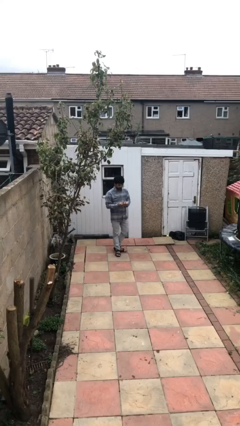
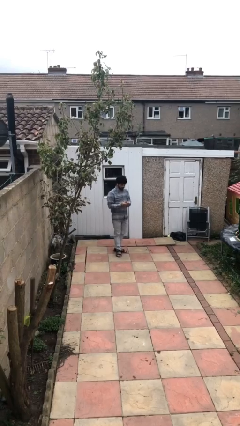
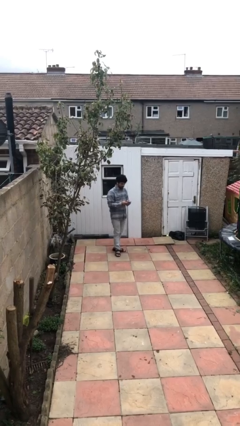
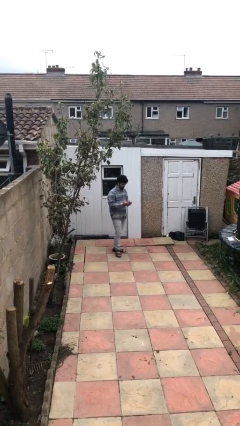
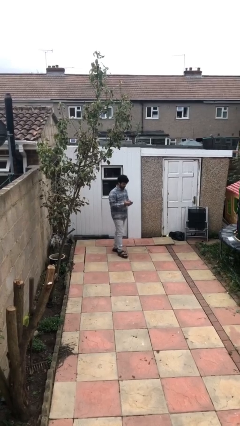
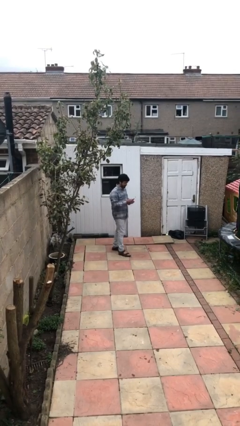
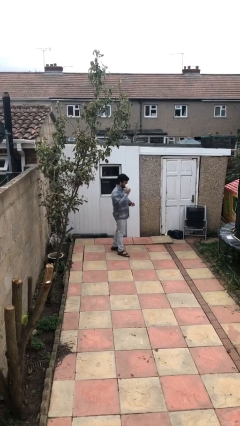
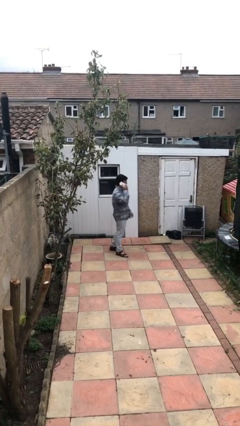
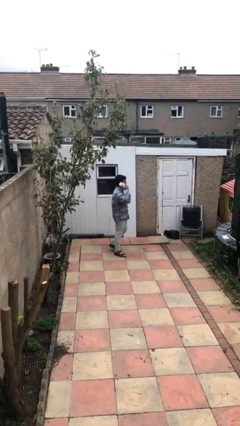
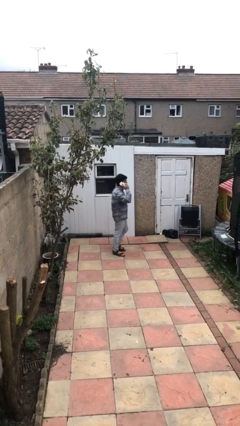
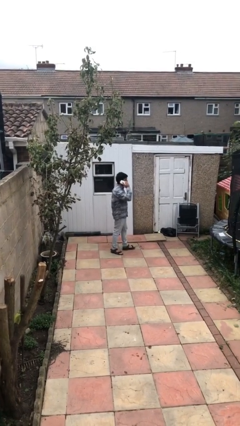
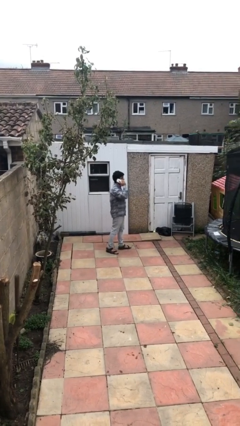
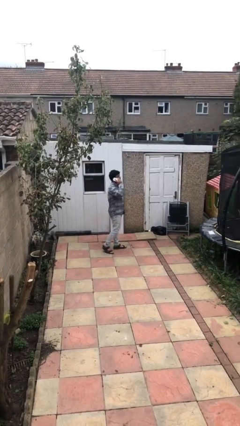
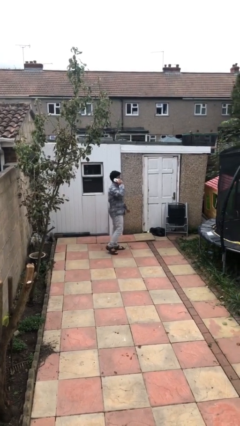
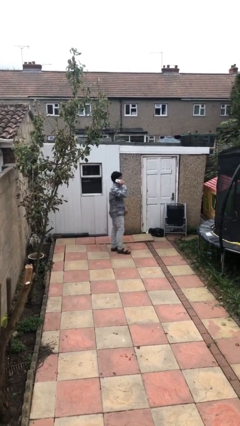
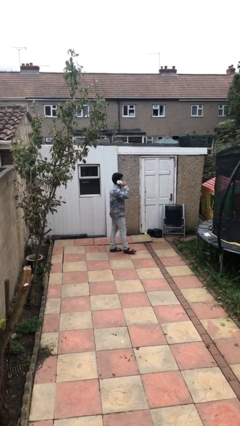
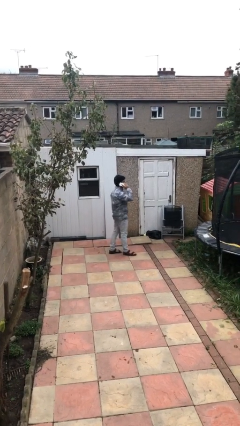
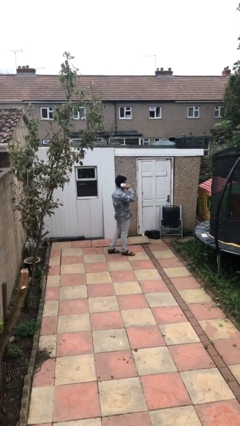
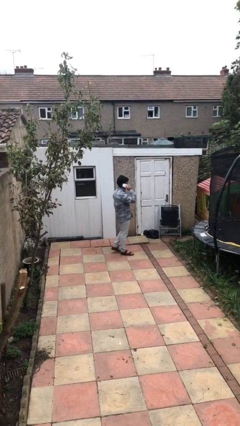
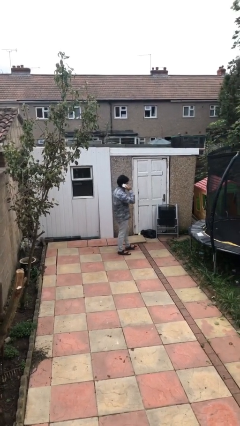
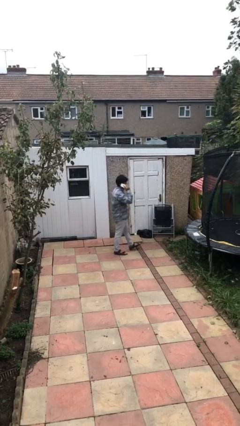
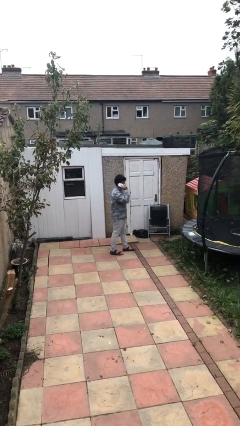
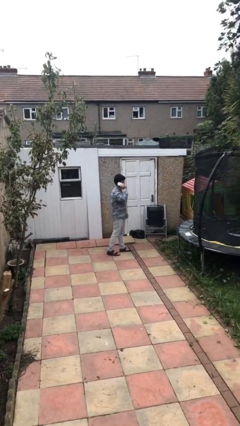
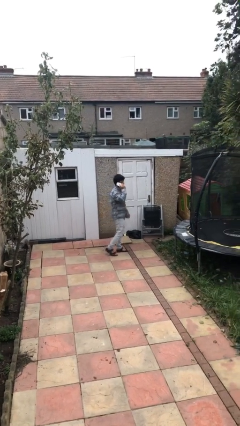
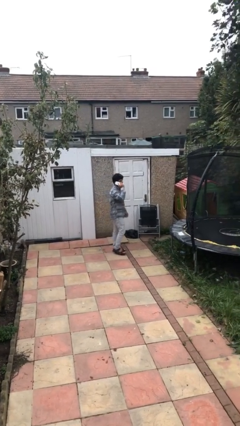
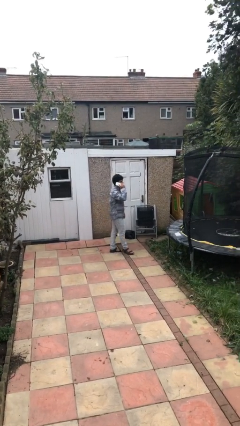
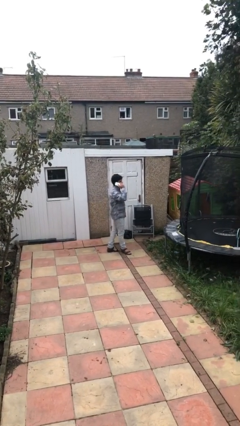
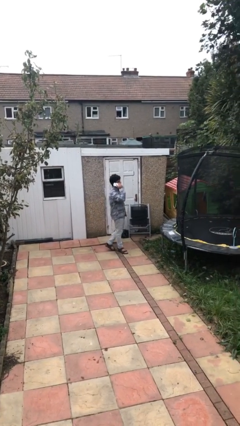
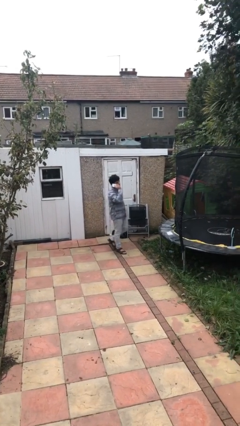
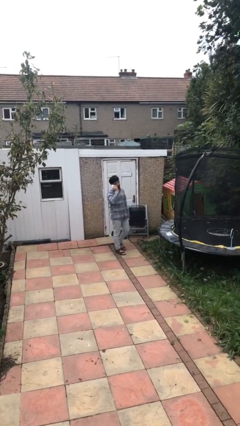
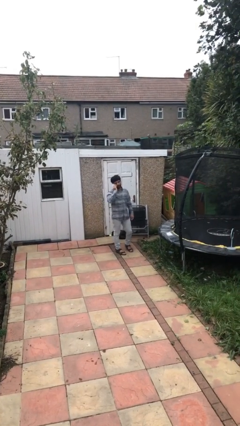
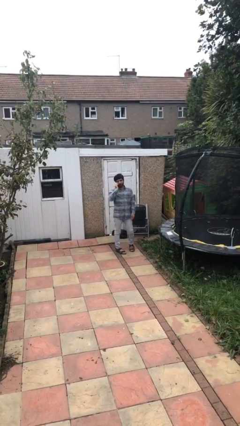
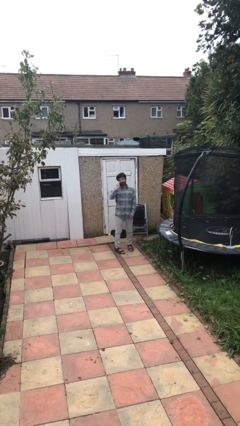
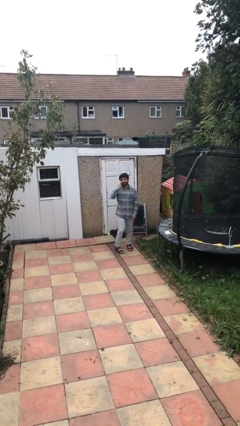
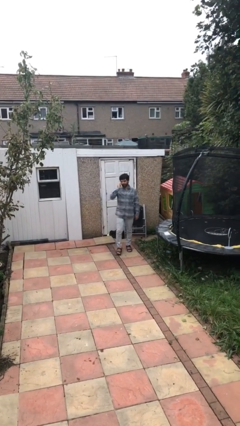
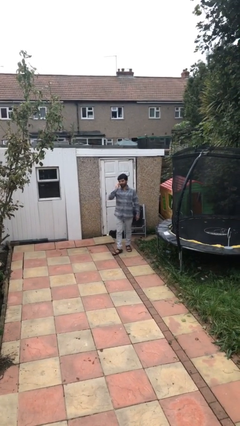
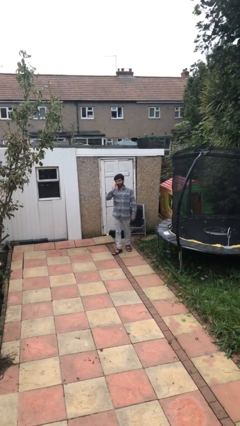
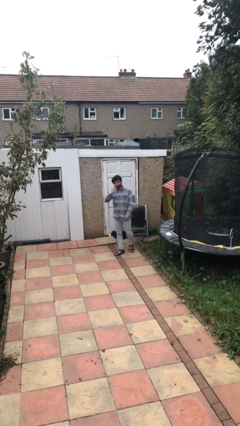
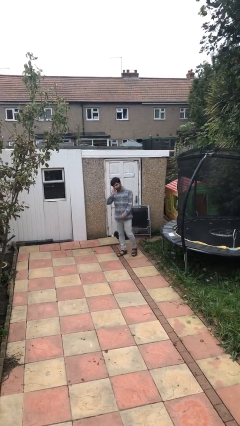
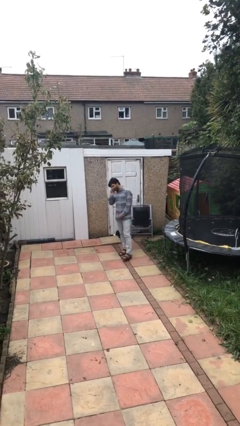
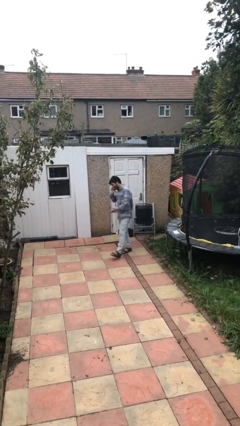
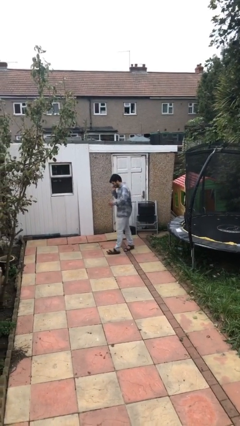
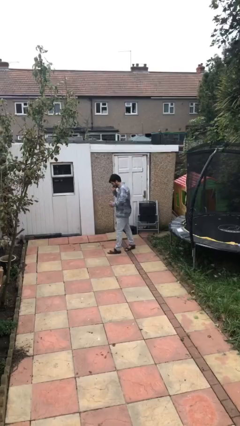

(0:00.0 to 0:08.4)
person talks on phone

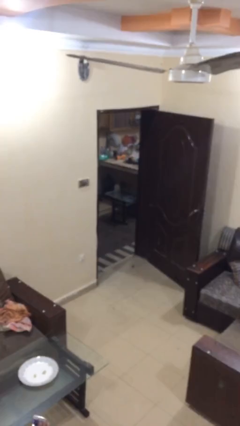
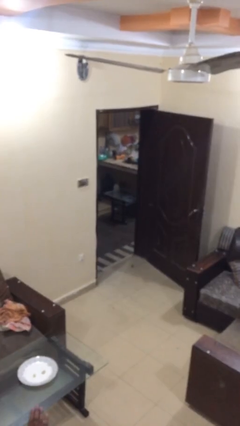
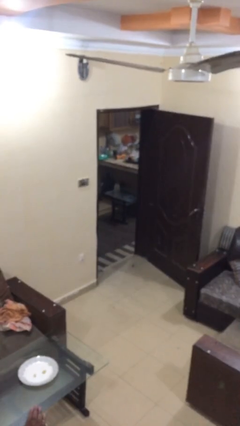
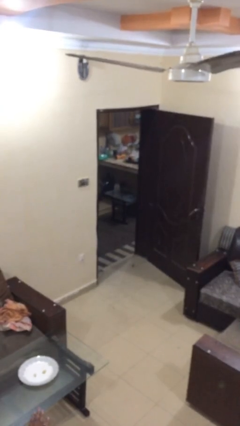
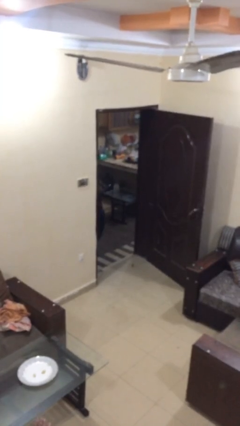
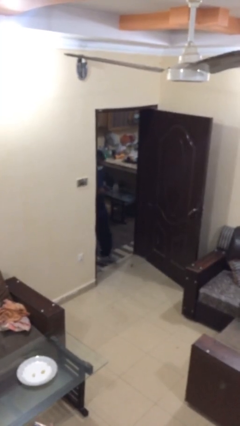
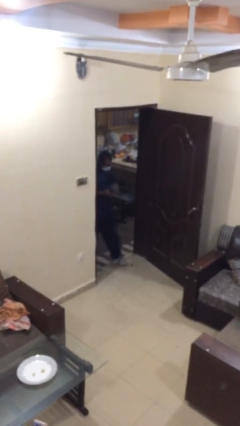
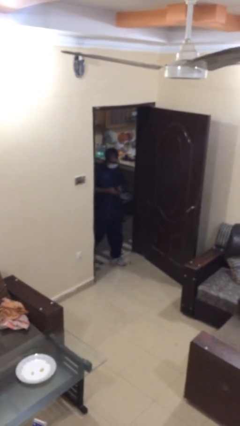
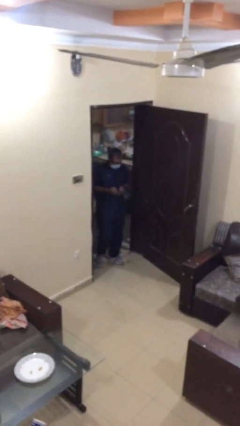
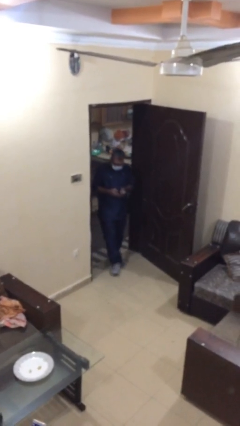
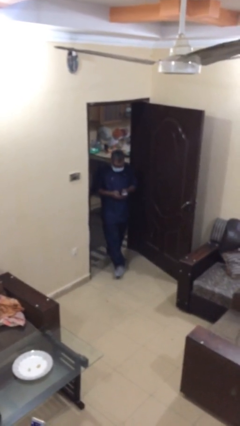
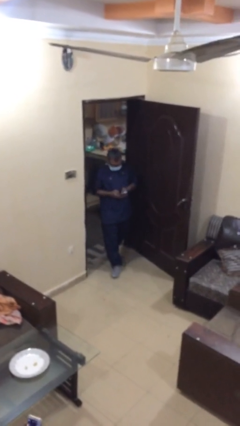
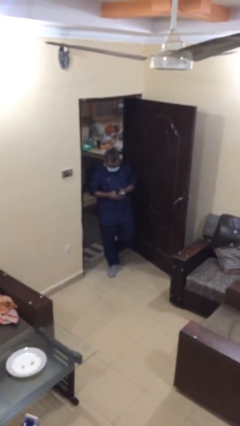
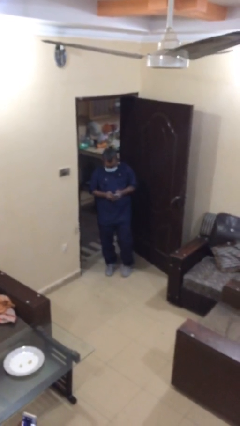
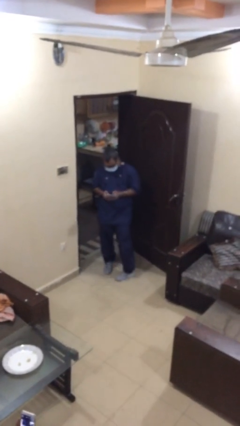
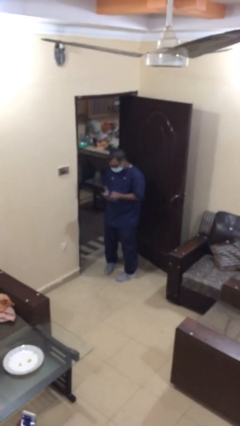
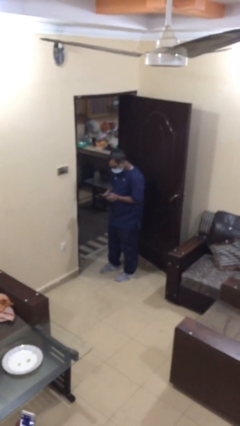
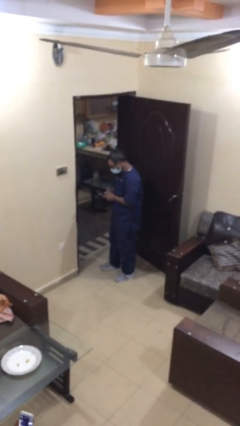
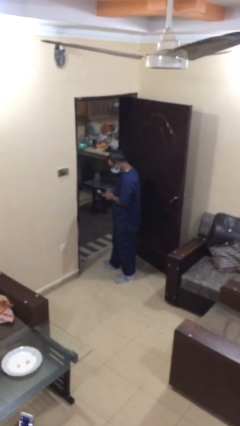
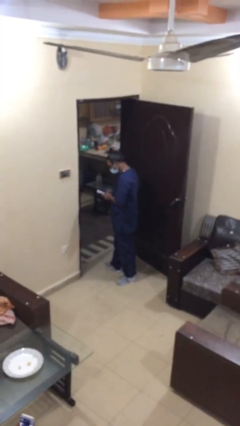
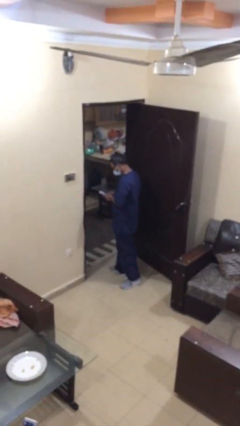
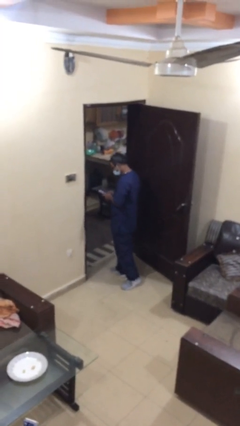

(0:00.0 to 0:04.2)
person enters scene through structure

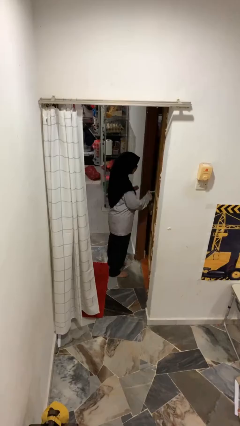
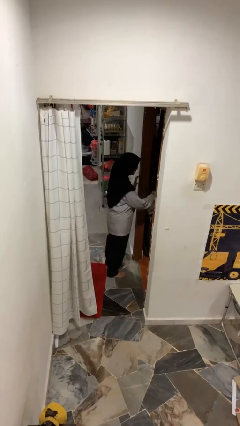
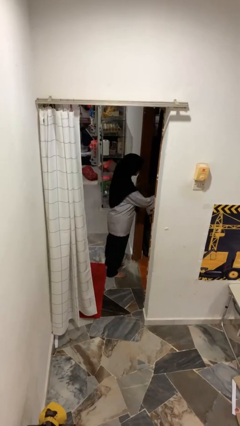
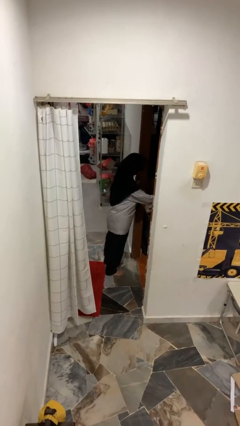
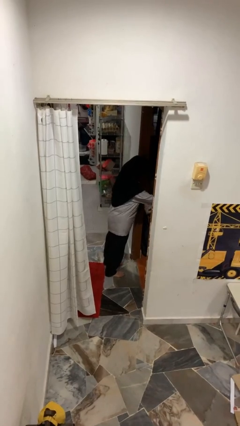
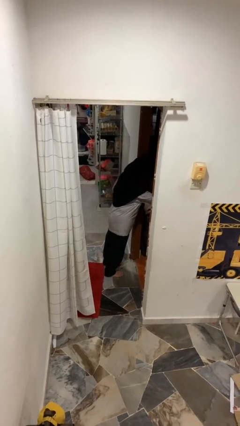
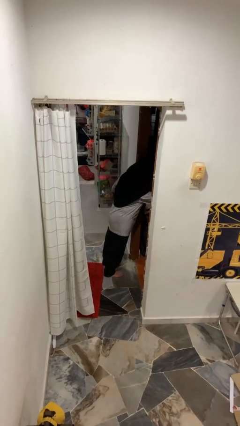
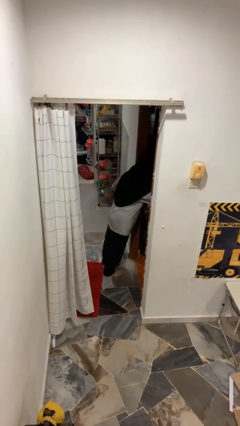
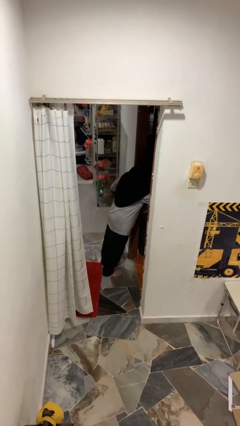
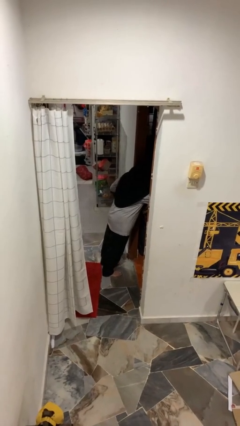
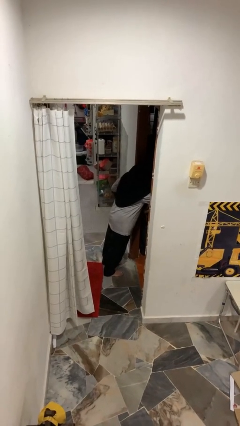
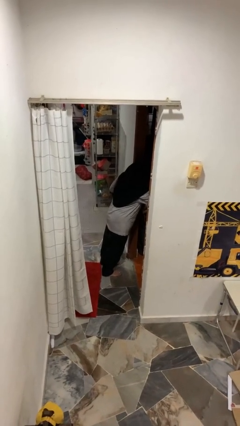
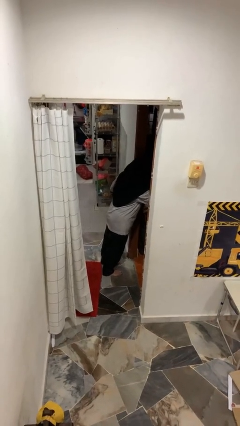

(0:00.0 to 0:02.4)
person opens facility door

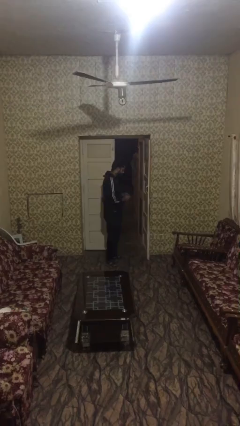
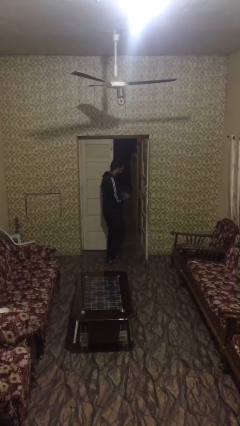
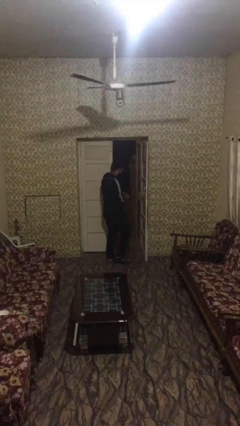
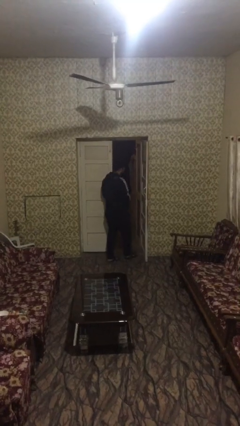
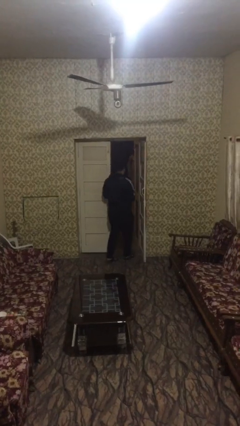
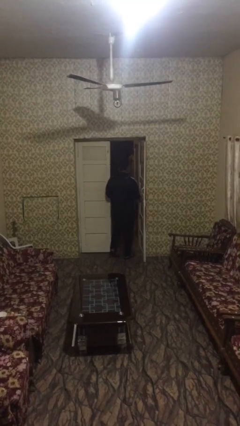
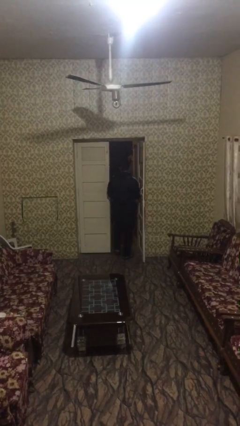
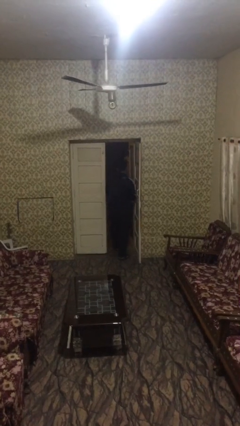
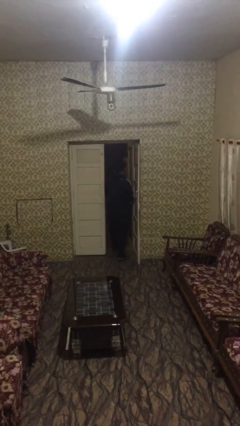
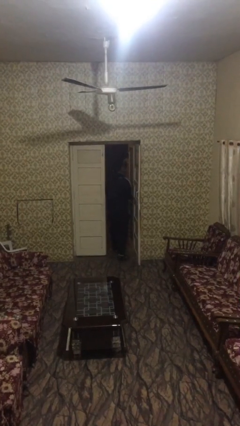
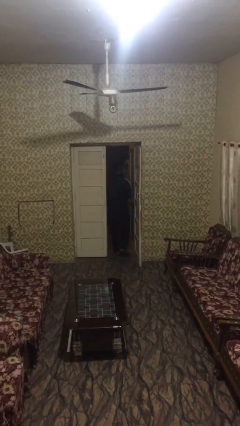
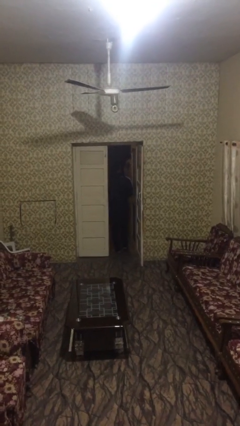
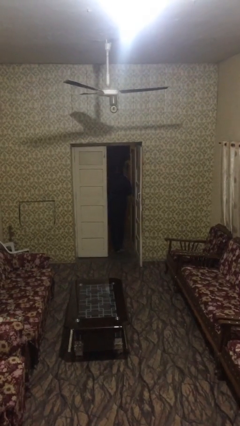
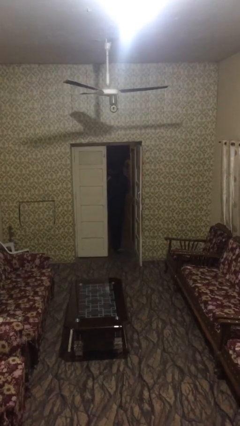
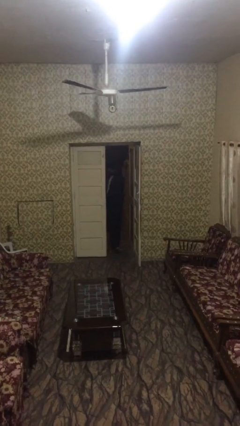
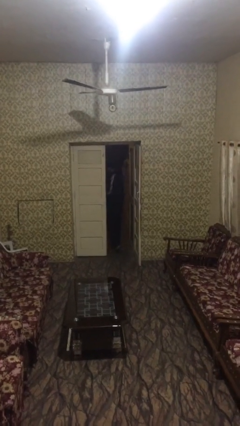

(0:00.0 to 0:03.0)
person exits scene through structure
